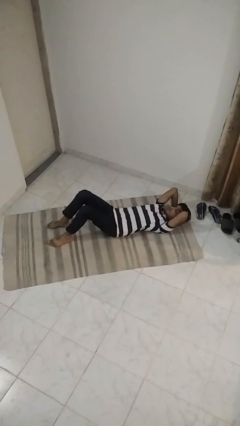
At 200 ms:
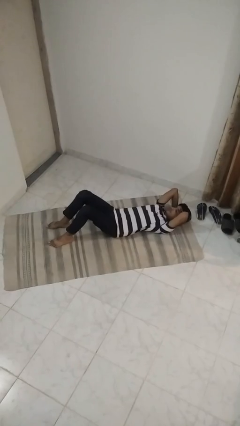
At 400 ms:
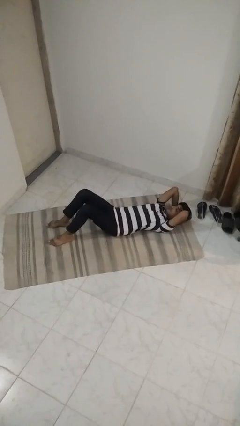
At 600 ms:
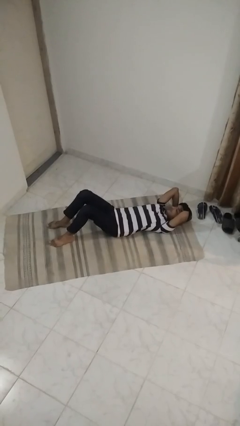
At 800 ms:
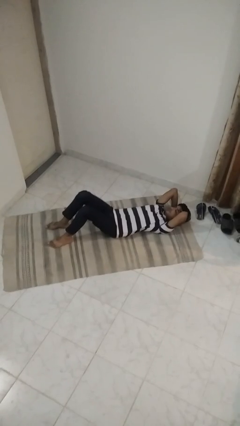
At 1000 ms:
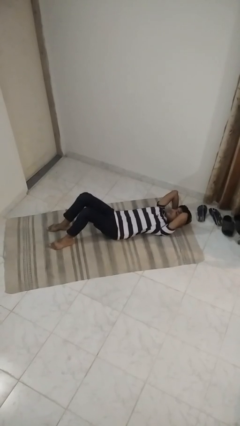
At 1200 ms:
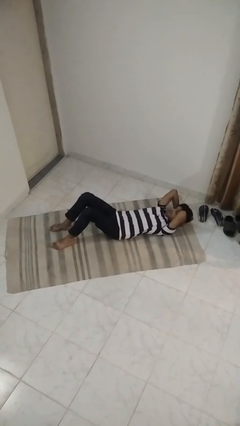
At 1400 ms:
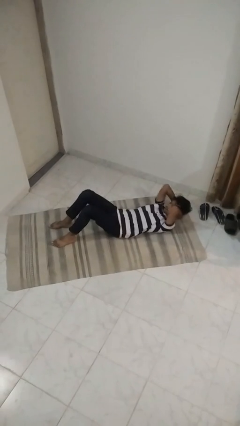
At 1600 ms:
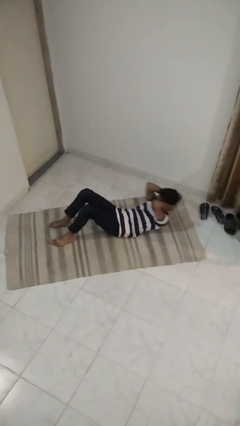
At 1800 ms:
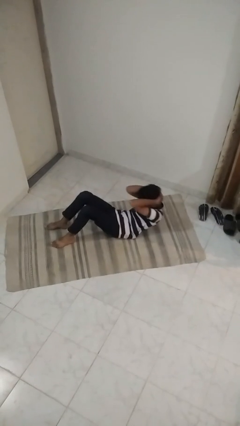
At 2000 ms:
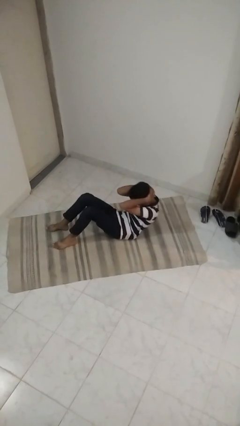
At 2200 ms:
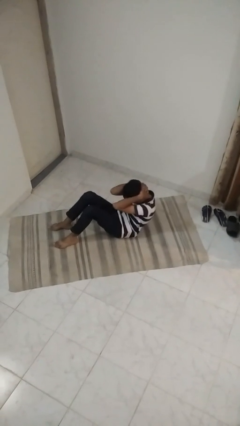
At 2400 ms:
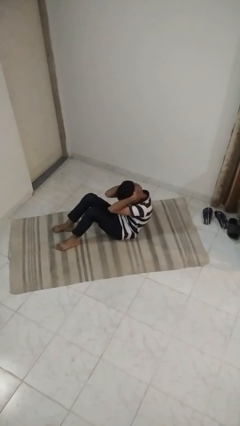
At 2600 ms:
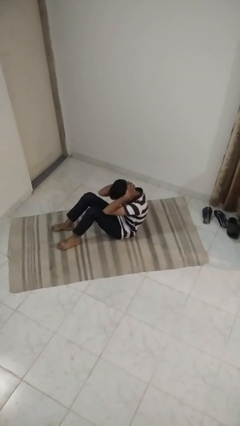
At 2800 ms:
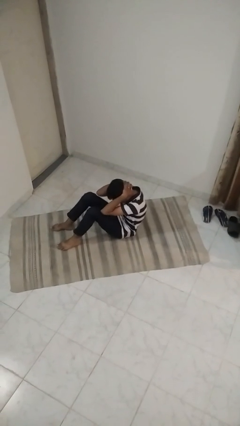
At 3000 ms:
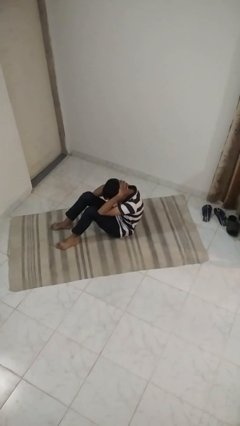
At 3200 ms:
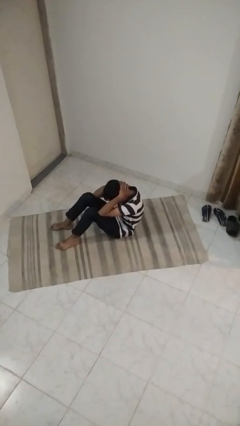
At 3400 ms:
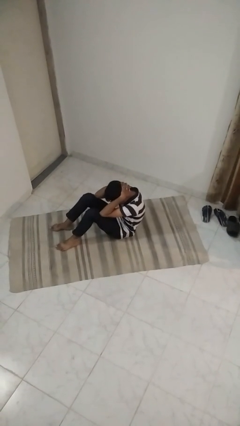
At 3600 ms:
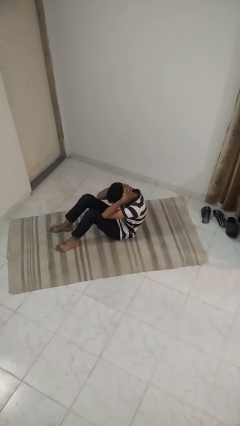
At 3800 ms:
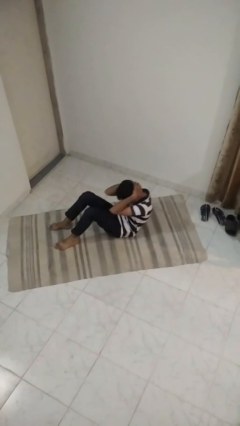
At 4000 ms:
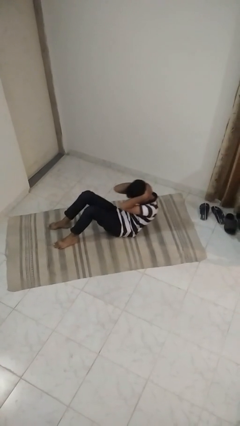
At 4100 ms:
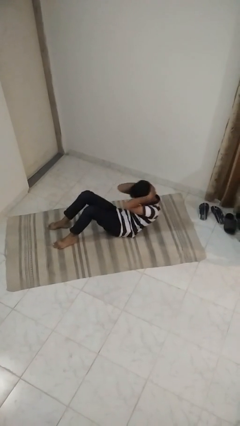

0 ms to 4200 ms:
person exercises with situp

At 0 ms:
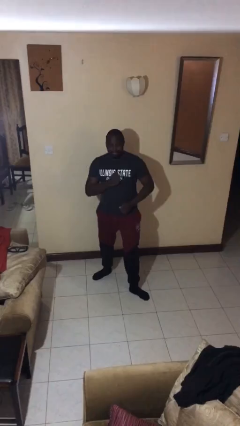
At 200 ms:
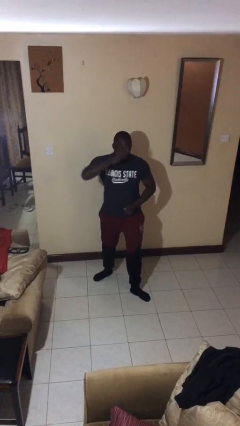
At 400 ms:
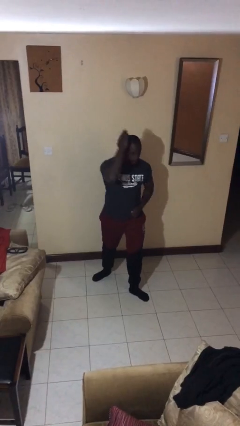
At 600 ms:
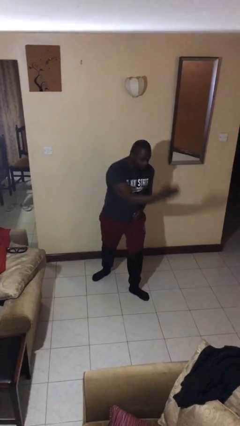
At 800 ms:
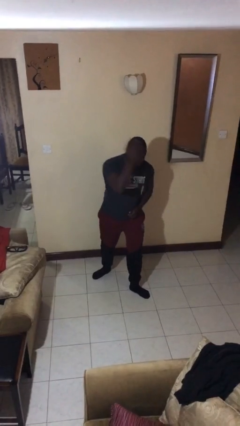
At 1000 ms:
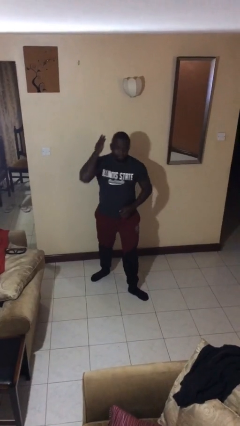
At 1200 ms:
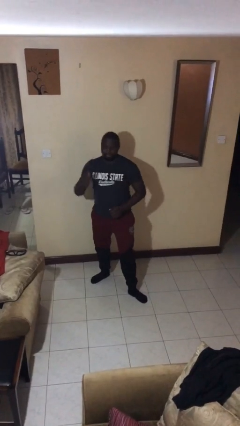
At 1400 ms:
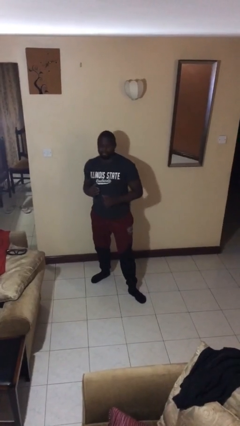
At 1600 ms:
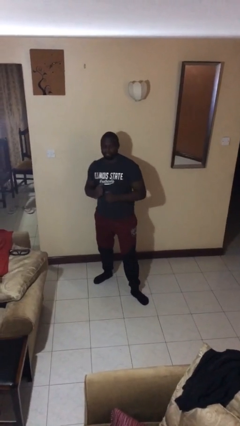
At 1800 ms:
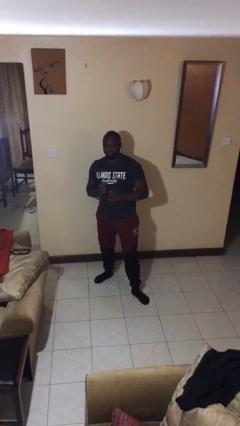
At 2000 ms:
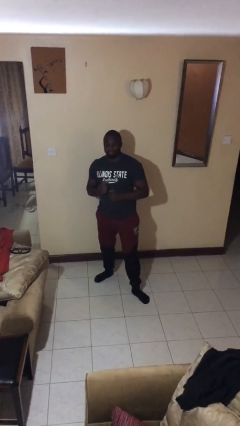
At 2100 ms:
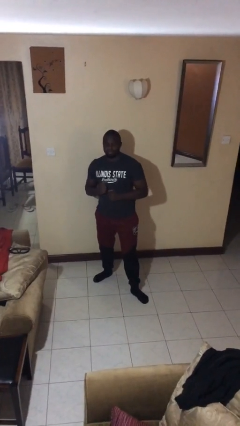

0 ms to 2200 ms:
person karate chop

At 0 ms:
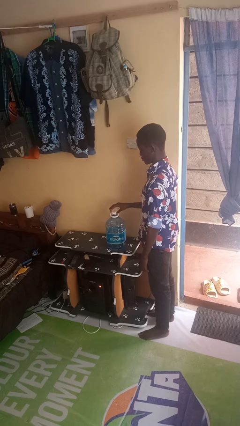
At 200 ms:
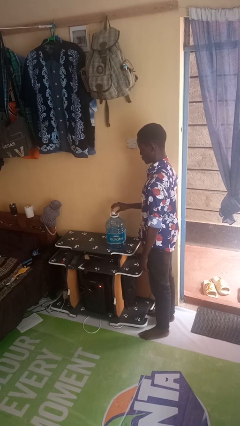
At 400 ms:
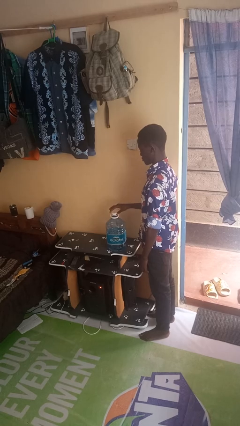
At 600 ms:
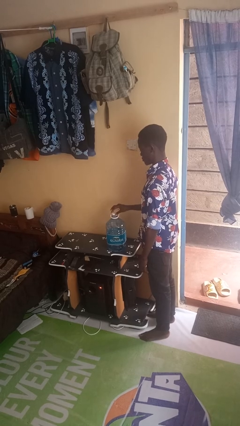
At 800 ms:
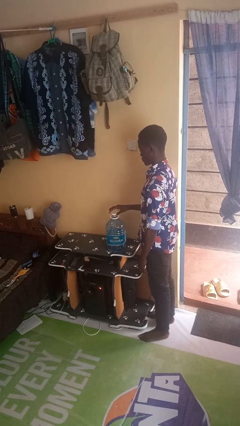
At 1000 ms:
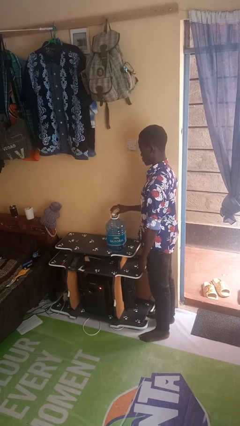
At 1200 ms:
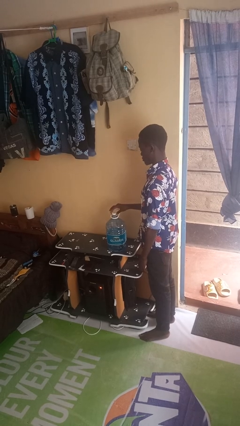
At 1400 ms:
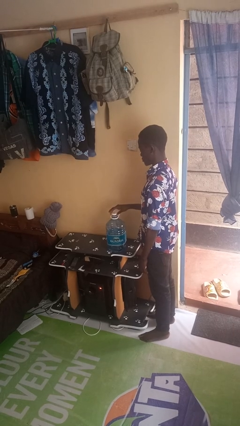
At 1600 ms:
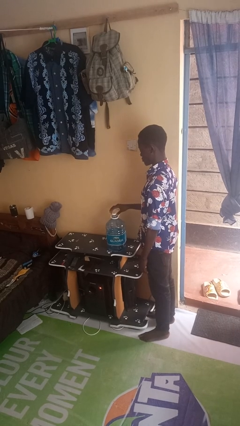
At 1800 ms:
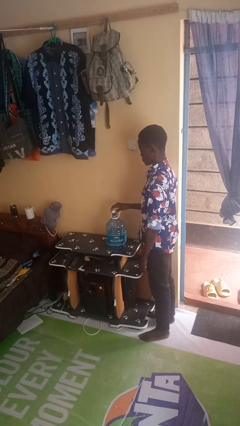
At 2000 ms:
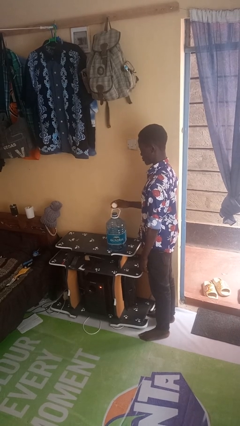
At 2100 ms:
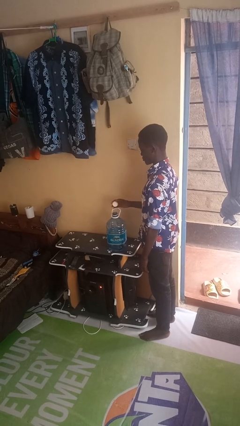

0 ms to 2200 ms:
person unscrews lid from bottle

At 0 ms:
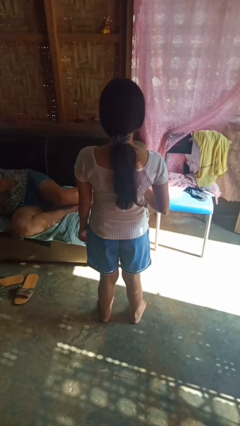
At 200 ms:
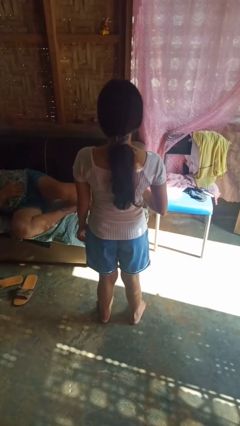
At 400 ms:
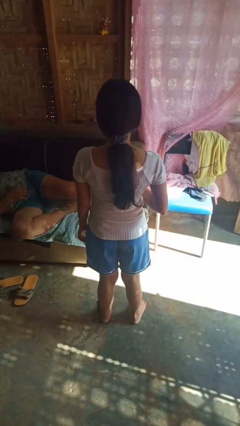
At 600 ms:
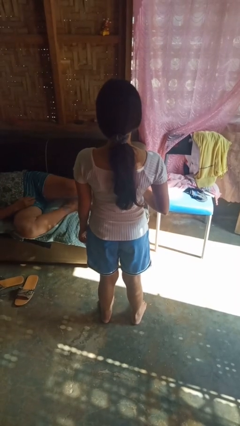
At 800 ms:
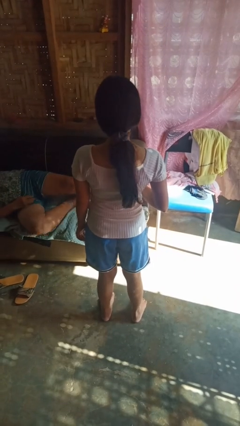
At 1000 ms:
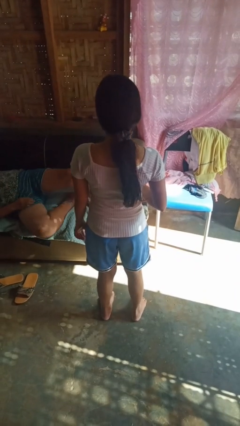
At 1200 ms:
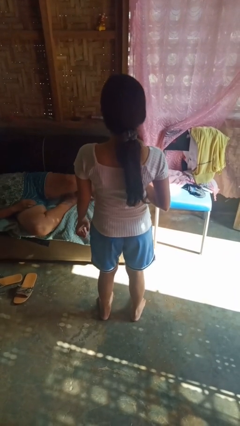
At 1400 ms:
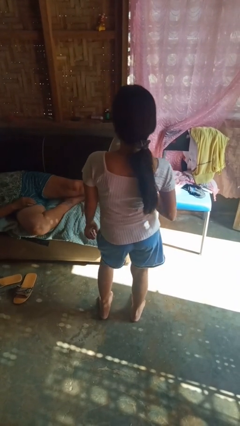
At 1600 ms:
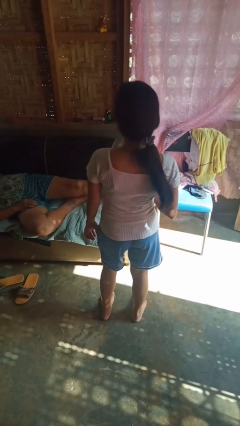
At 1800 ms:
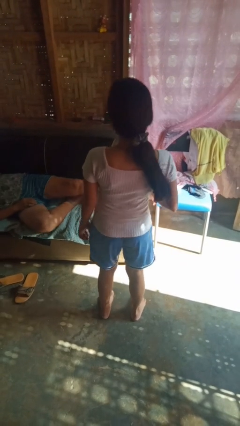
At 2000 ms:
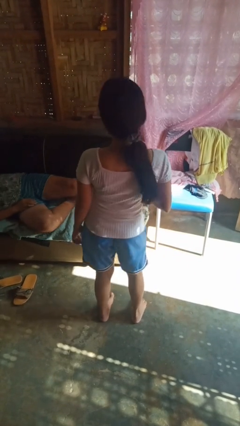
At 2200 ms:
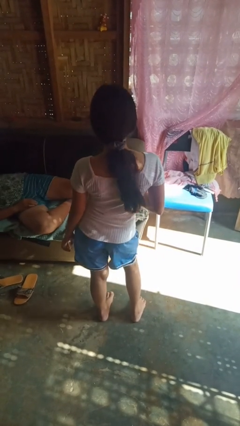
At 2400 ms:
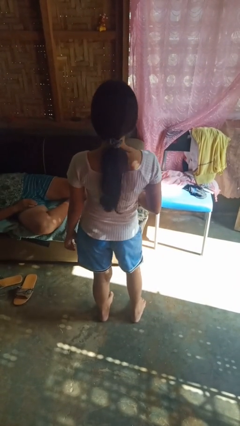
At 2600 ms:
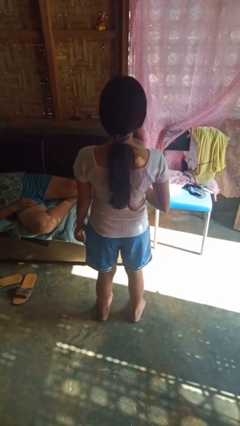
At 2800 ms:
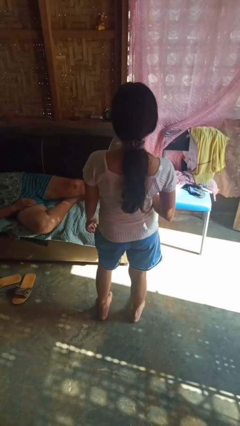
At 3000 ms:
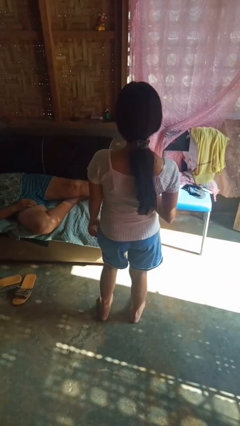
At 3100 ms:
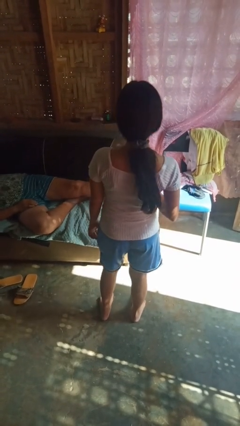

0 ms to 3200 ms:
person wiggles hips

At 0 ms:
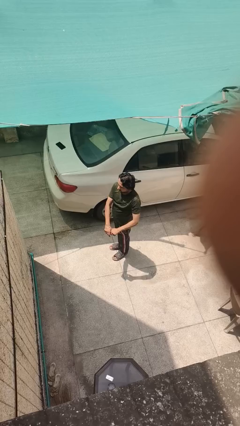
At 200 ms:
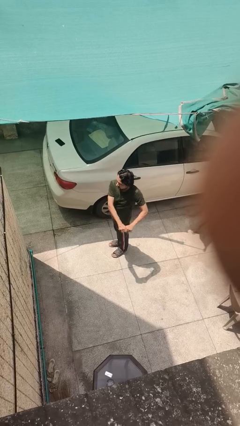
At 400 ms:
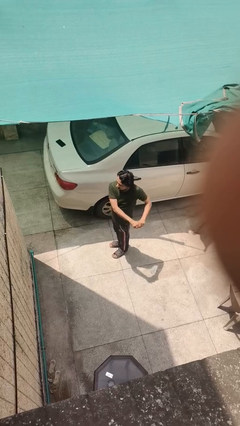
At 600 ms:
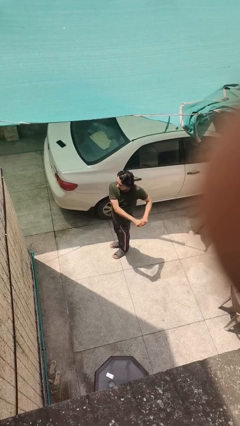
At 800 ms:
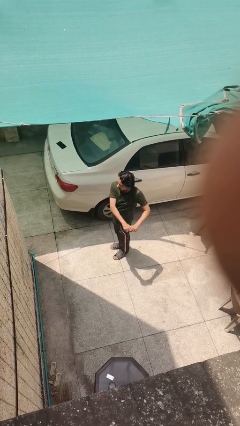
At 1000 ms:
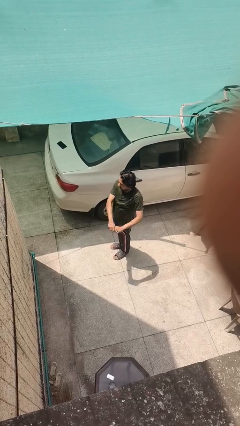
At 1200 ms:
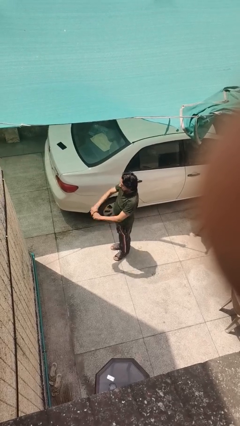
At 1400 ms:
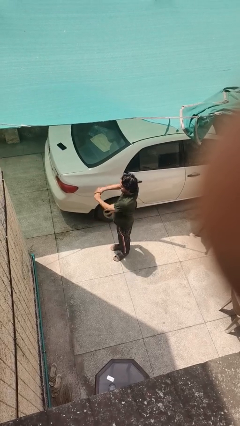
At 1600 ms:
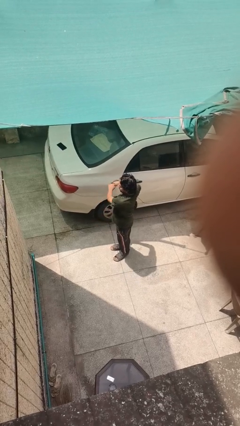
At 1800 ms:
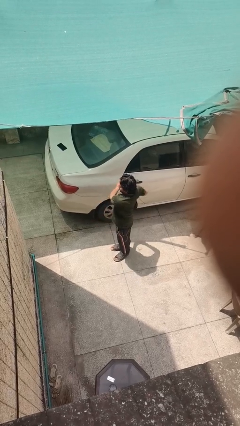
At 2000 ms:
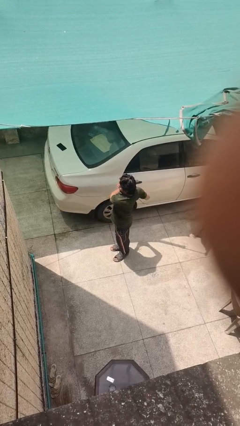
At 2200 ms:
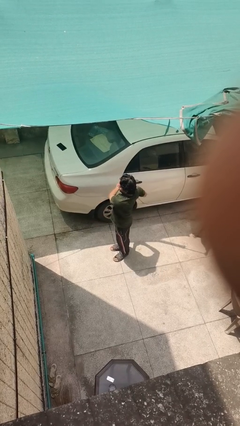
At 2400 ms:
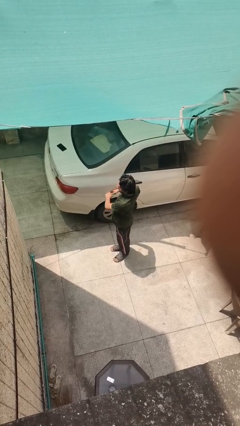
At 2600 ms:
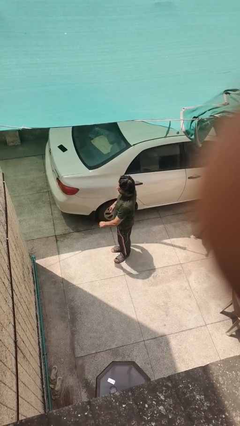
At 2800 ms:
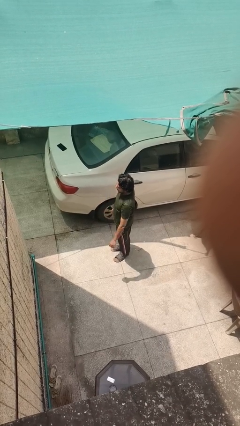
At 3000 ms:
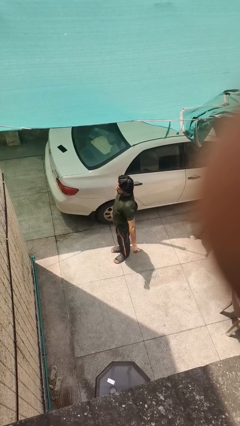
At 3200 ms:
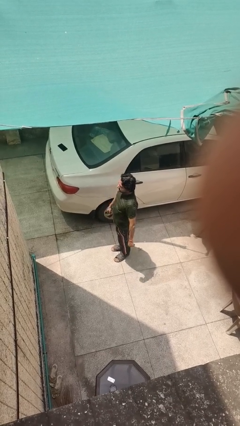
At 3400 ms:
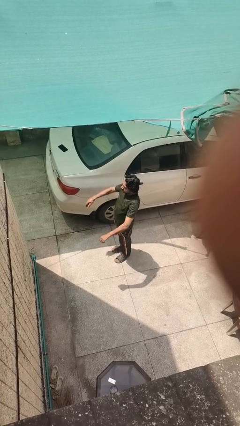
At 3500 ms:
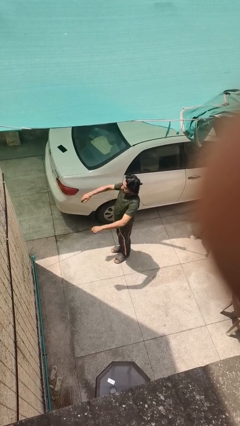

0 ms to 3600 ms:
person stretches arms to side

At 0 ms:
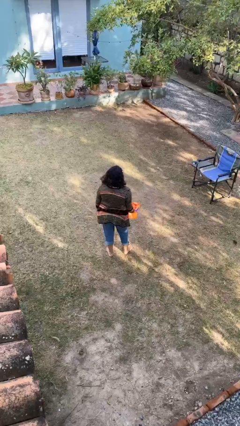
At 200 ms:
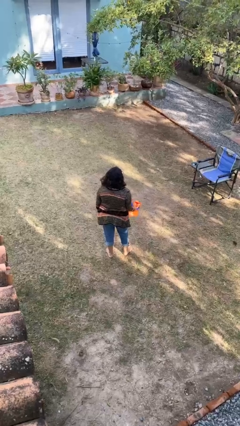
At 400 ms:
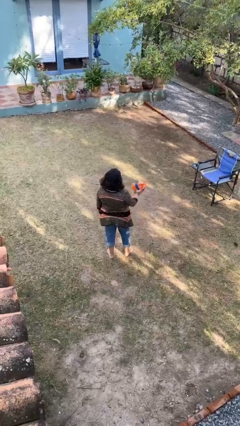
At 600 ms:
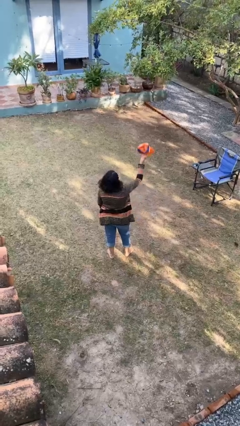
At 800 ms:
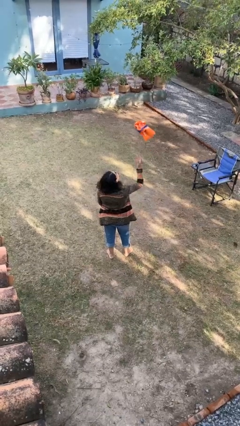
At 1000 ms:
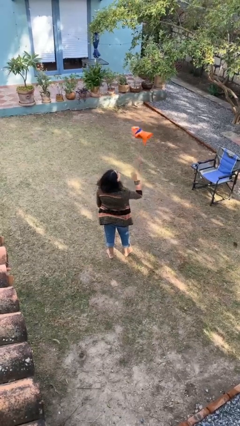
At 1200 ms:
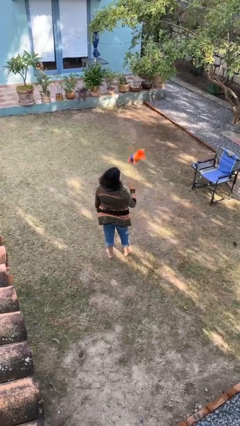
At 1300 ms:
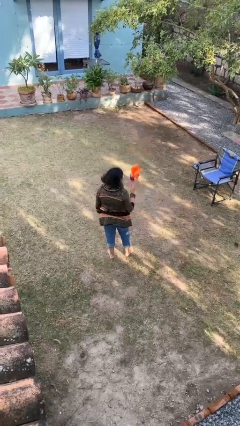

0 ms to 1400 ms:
person throws object into air

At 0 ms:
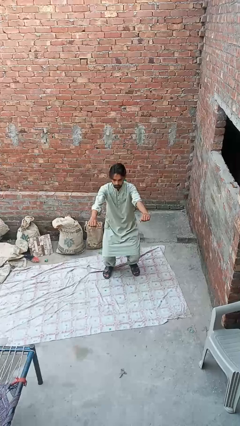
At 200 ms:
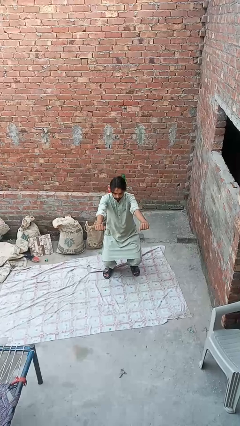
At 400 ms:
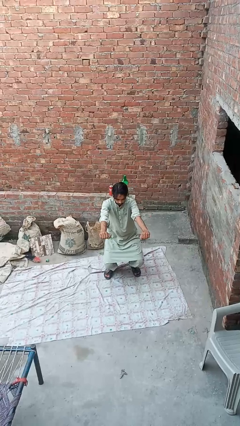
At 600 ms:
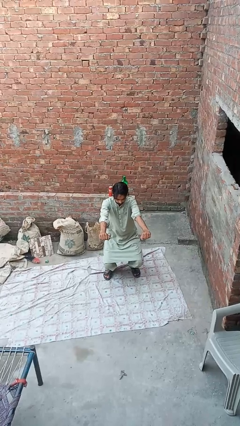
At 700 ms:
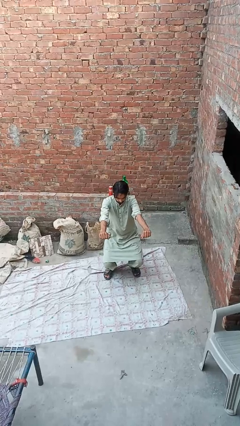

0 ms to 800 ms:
person squats
